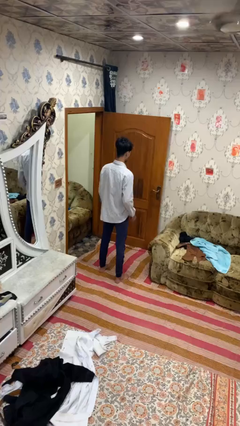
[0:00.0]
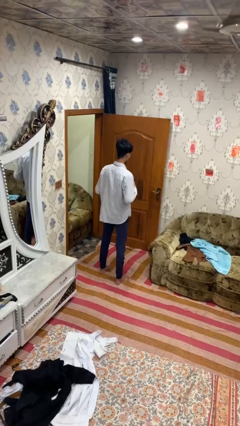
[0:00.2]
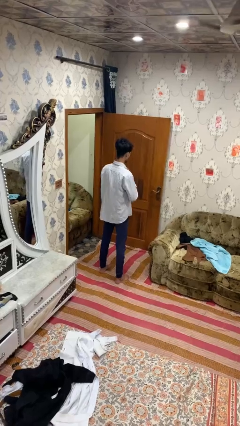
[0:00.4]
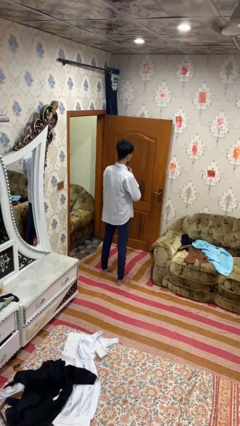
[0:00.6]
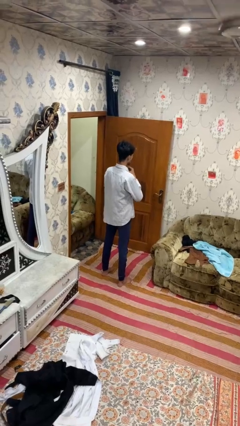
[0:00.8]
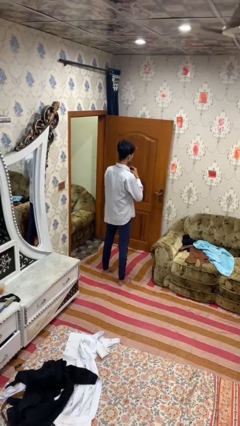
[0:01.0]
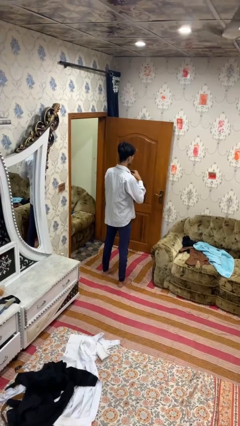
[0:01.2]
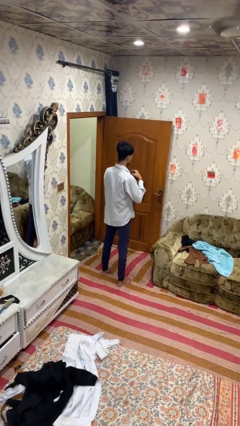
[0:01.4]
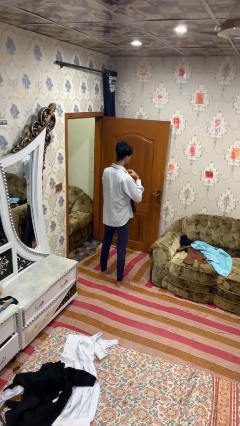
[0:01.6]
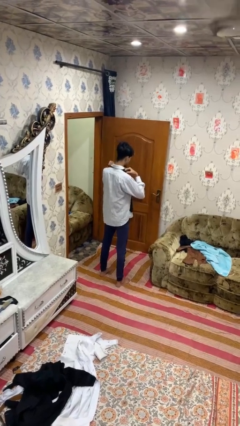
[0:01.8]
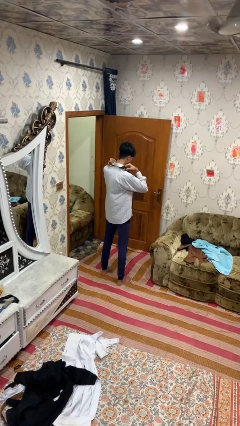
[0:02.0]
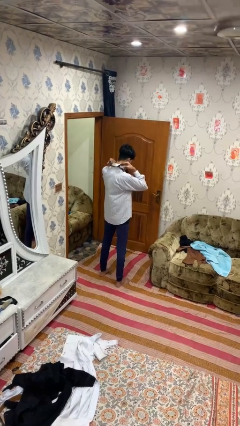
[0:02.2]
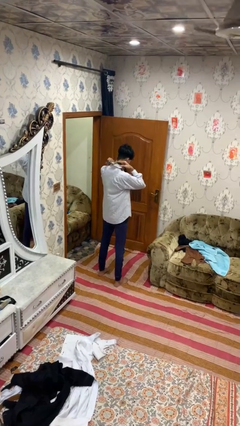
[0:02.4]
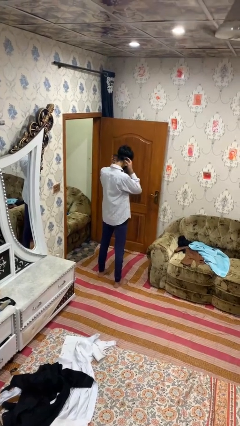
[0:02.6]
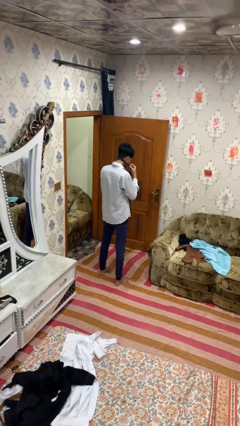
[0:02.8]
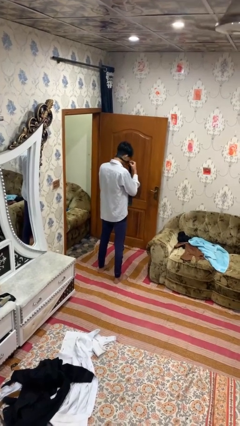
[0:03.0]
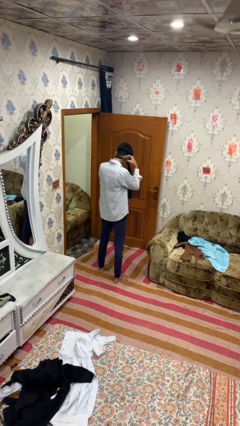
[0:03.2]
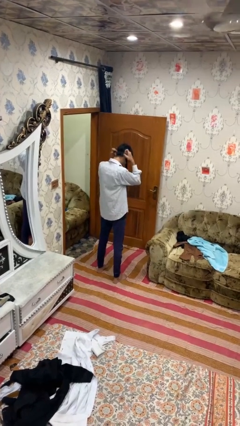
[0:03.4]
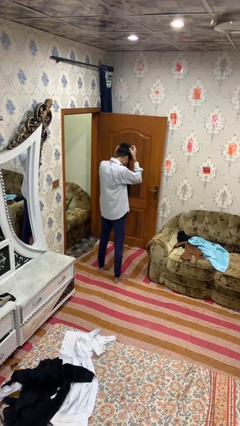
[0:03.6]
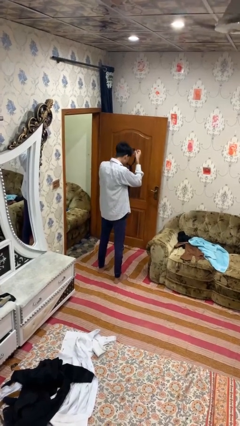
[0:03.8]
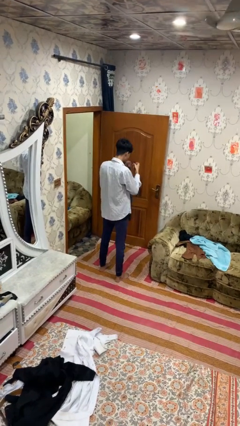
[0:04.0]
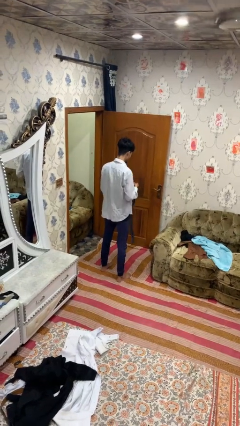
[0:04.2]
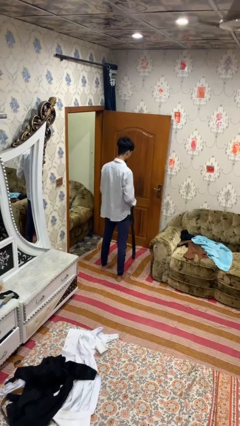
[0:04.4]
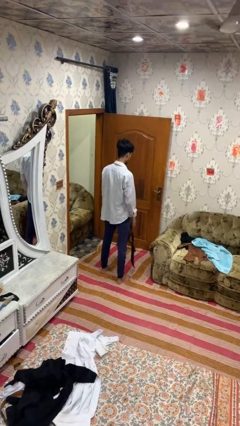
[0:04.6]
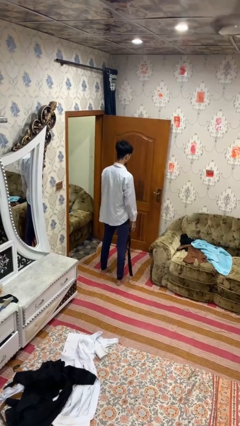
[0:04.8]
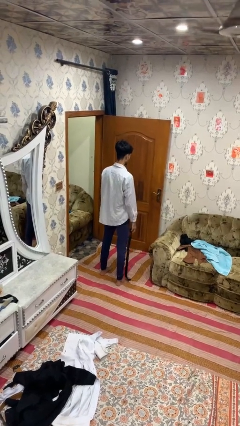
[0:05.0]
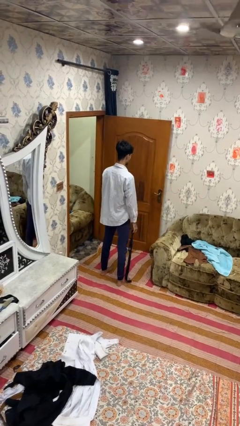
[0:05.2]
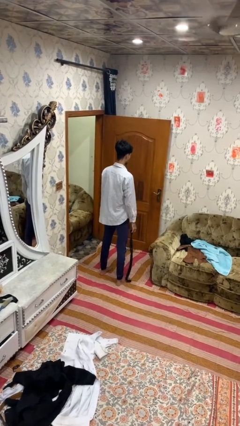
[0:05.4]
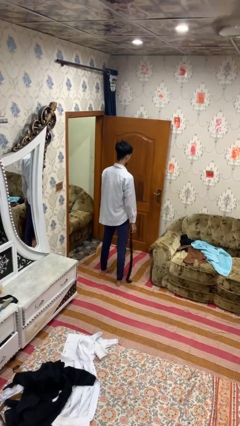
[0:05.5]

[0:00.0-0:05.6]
person takes off necktie

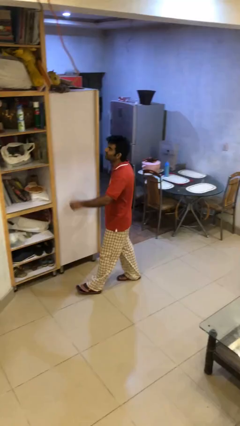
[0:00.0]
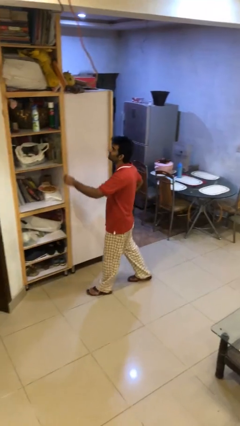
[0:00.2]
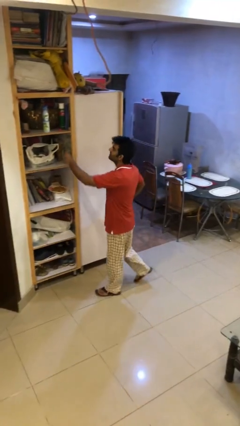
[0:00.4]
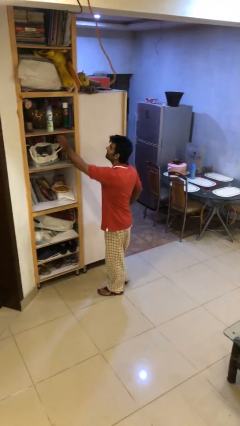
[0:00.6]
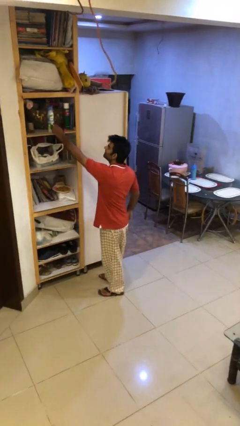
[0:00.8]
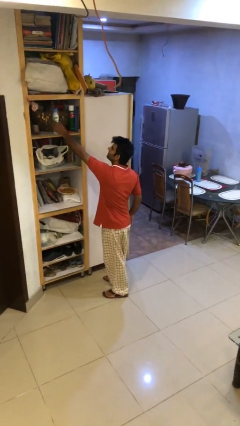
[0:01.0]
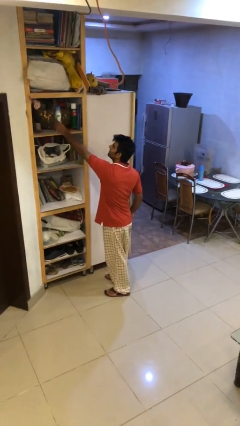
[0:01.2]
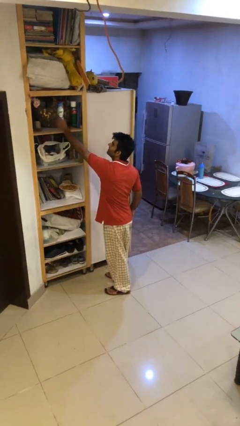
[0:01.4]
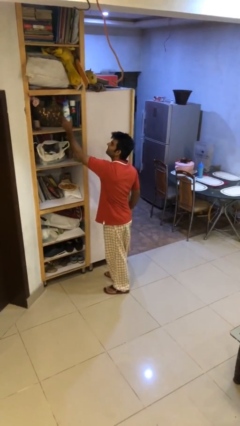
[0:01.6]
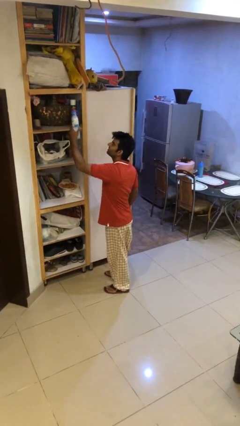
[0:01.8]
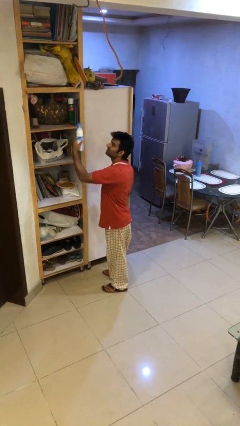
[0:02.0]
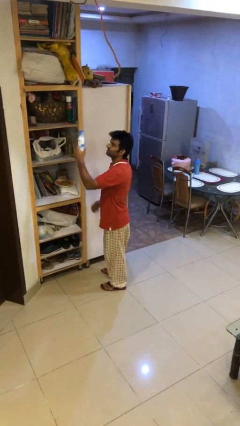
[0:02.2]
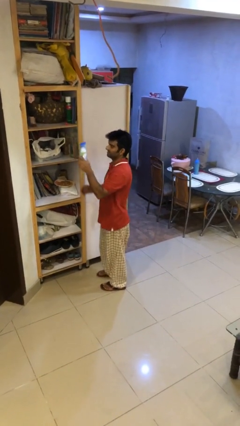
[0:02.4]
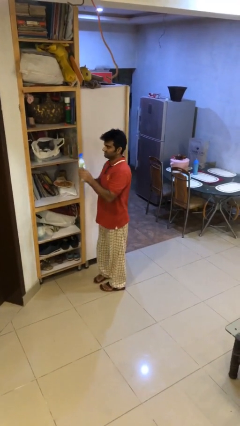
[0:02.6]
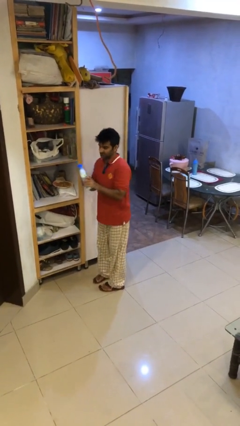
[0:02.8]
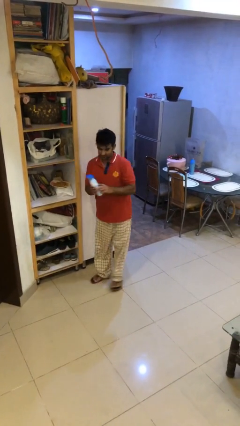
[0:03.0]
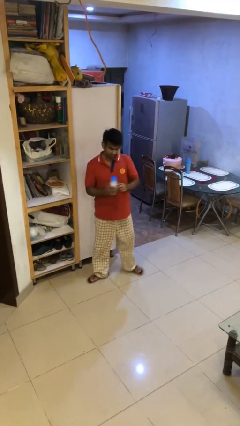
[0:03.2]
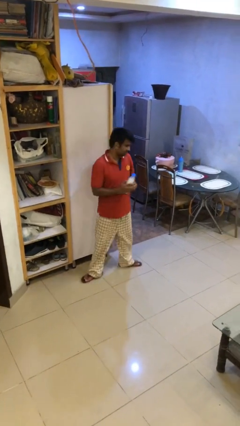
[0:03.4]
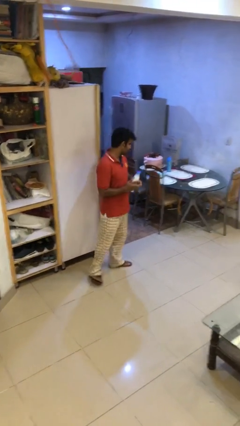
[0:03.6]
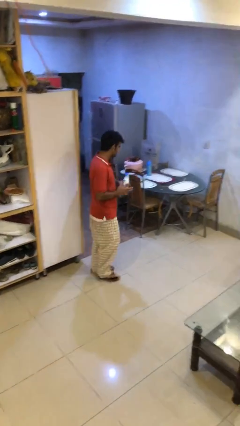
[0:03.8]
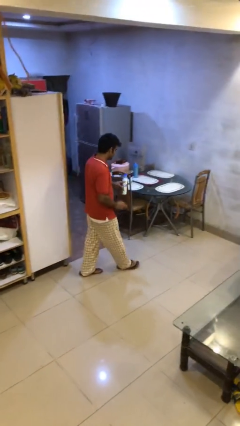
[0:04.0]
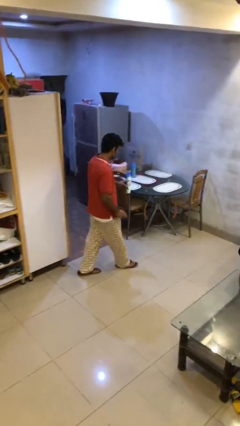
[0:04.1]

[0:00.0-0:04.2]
person picks up object from shelf

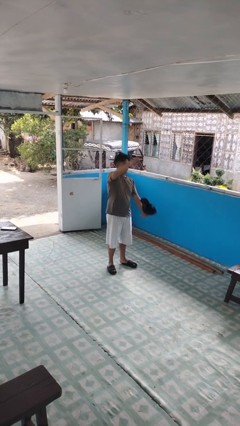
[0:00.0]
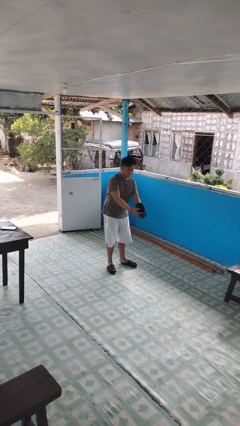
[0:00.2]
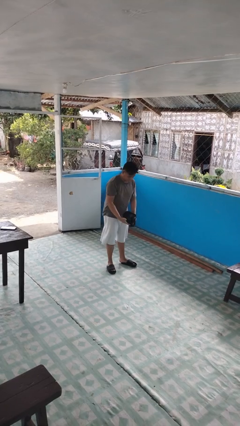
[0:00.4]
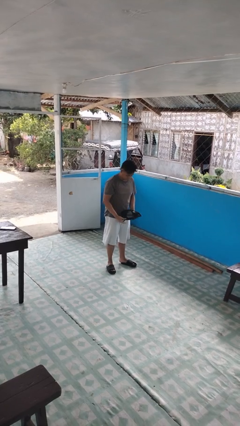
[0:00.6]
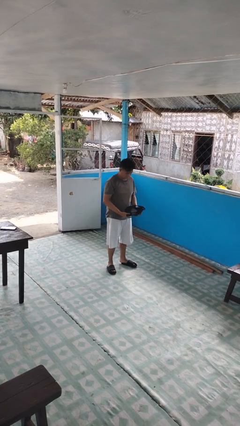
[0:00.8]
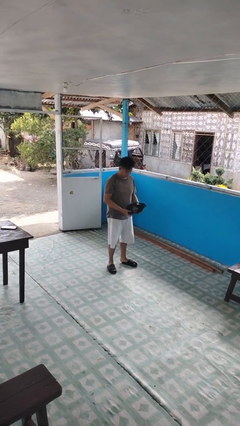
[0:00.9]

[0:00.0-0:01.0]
person catches dropped object

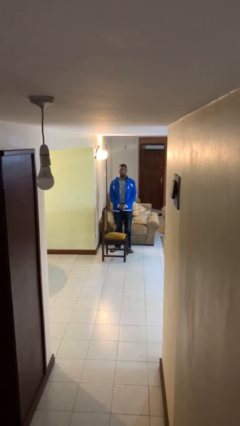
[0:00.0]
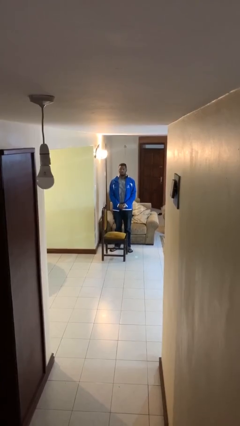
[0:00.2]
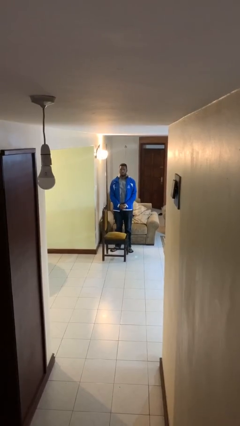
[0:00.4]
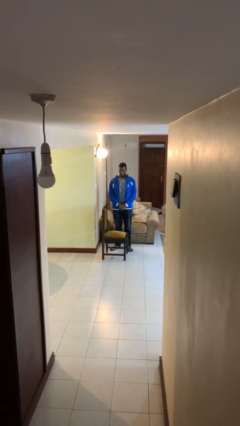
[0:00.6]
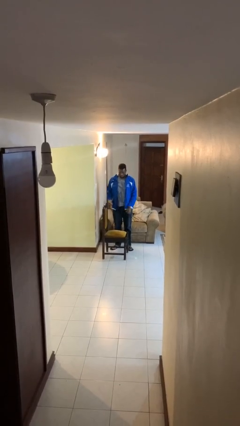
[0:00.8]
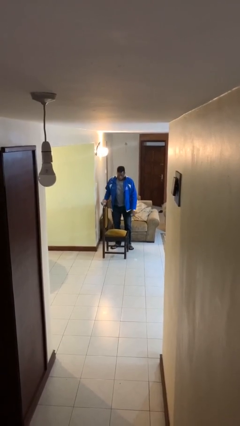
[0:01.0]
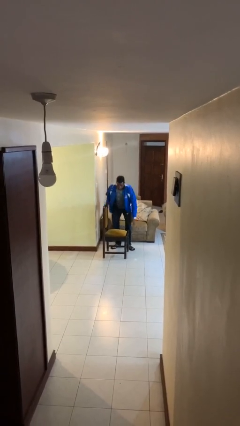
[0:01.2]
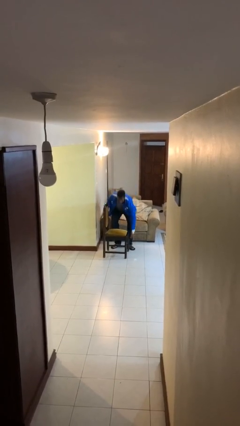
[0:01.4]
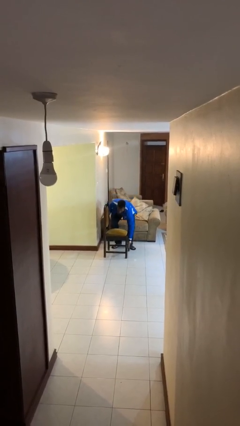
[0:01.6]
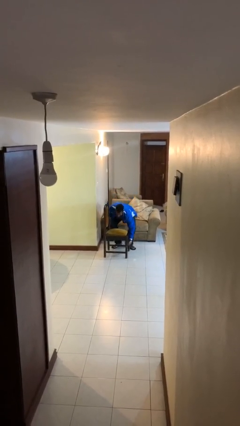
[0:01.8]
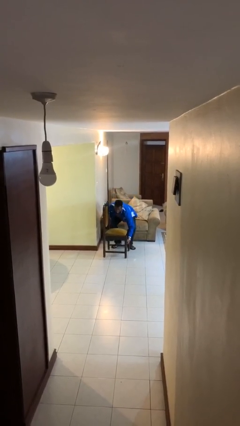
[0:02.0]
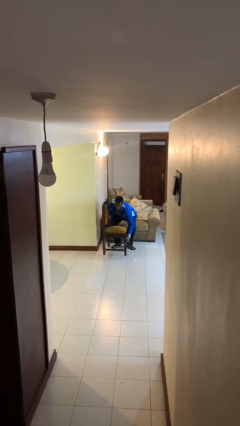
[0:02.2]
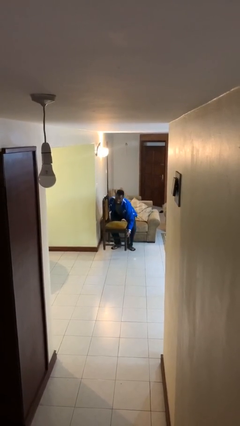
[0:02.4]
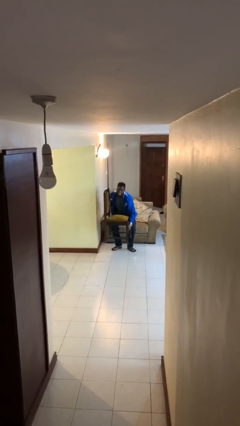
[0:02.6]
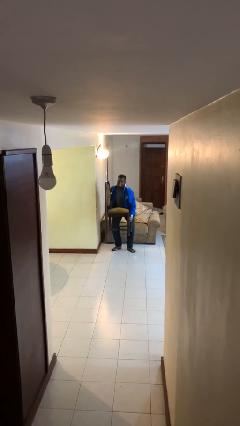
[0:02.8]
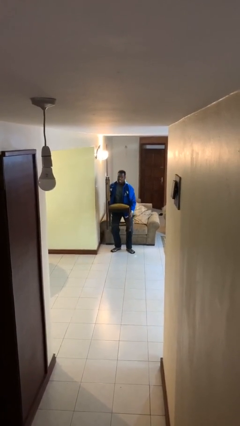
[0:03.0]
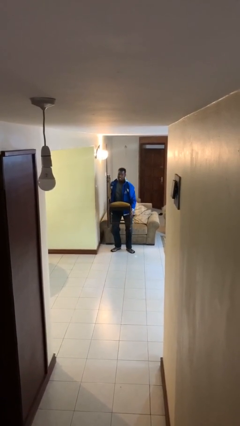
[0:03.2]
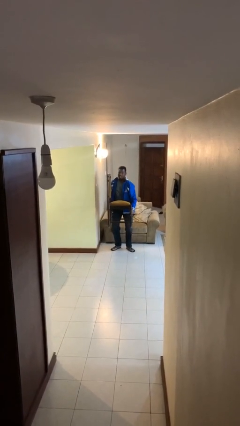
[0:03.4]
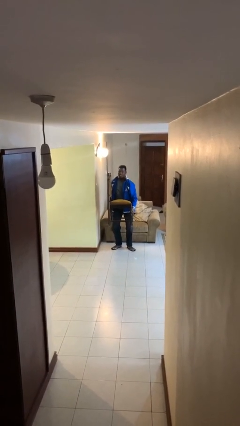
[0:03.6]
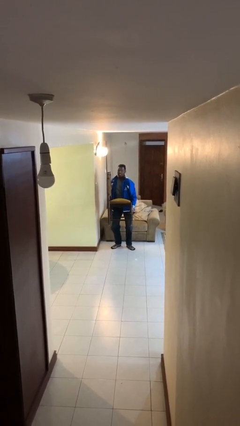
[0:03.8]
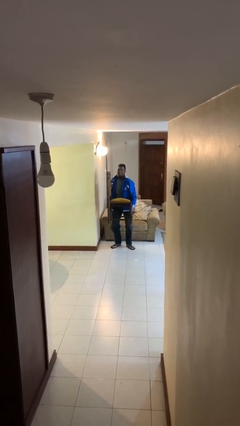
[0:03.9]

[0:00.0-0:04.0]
person picks up object from floor

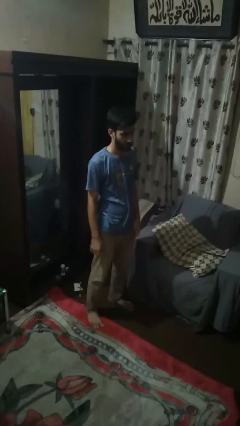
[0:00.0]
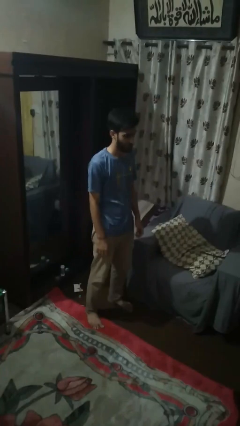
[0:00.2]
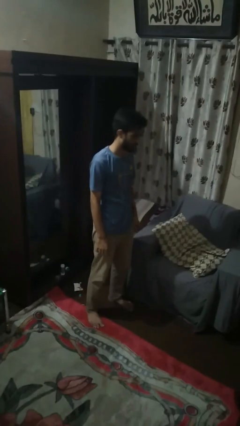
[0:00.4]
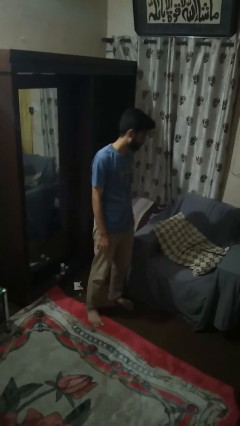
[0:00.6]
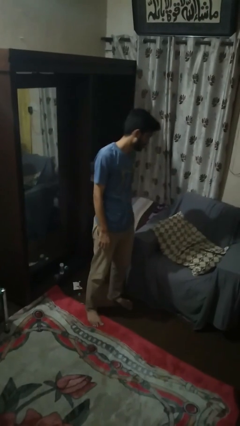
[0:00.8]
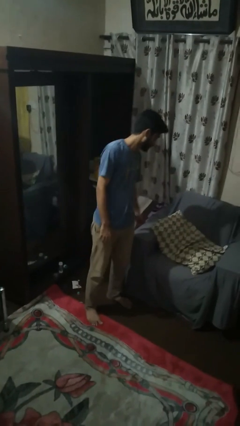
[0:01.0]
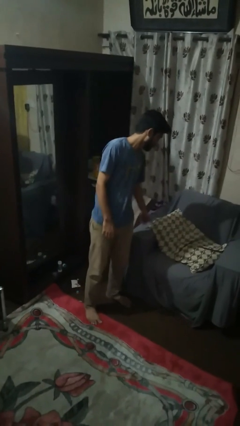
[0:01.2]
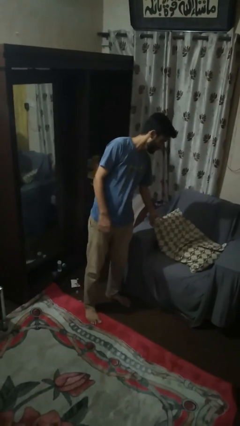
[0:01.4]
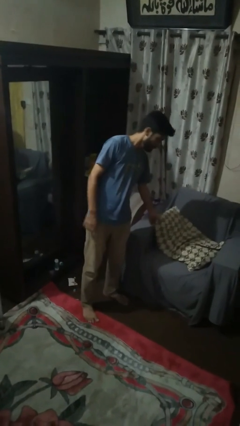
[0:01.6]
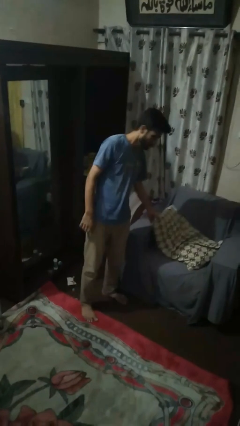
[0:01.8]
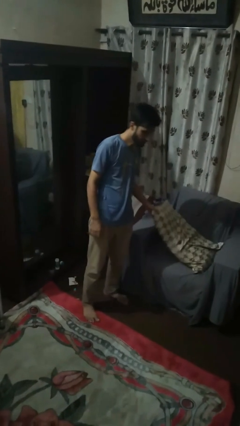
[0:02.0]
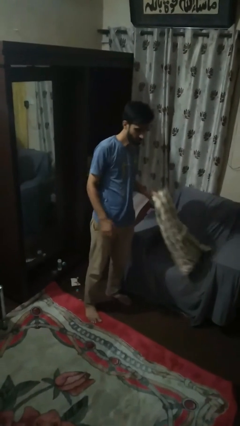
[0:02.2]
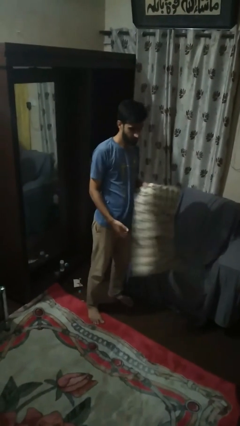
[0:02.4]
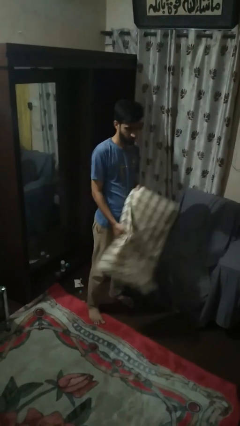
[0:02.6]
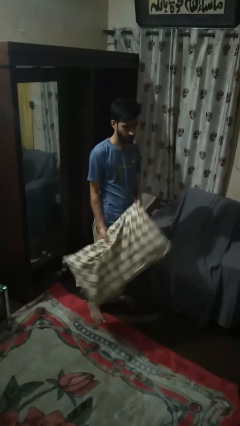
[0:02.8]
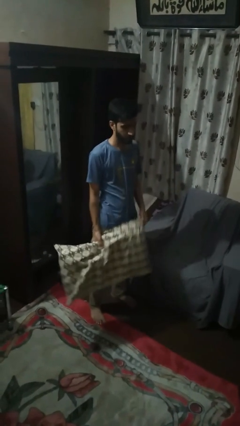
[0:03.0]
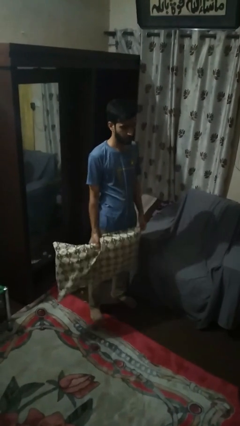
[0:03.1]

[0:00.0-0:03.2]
person picks up object from couch
